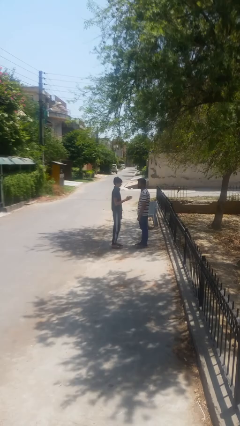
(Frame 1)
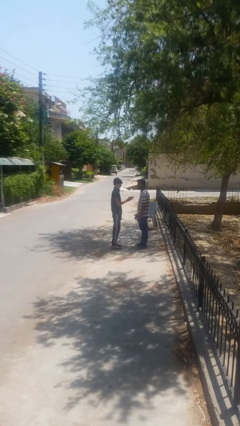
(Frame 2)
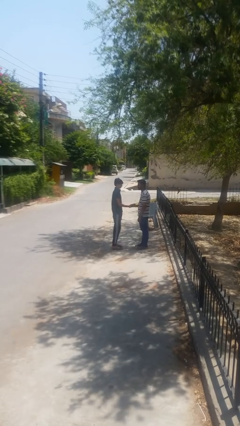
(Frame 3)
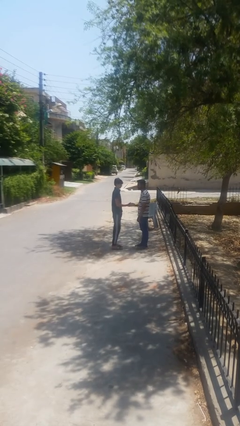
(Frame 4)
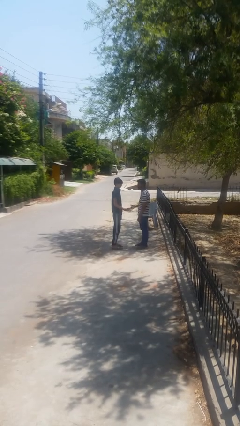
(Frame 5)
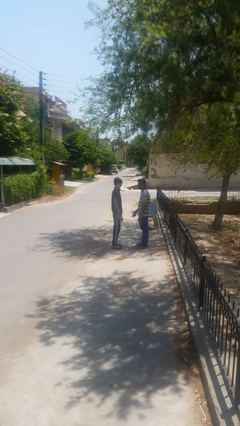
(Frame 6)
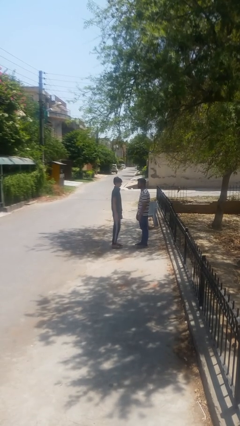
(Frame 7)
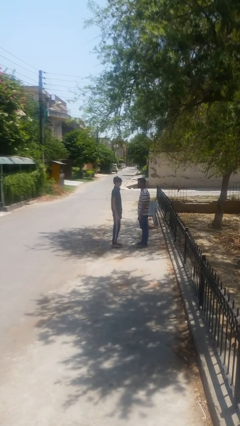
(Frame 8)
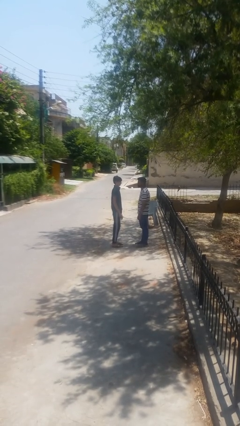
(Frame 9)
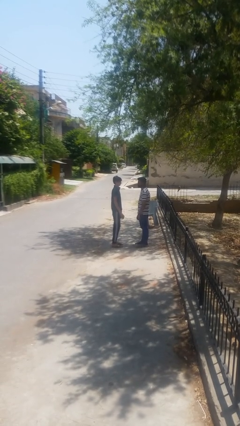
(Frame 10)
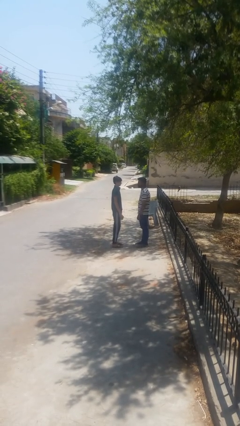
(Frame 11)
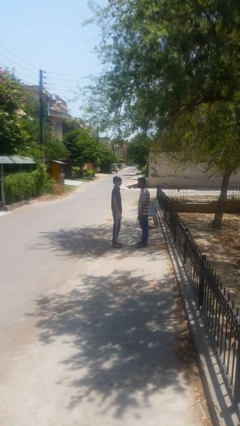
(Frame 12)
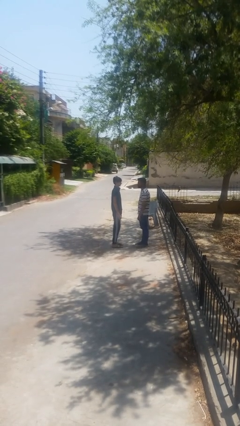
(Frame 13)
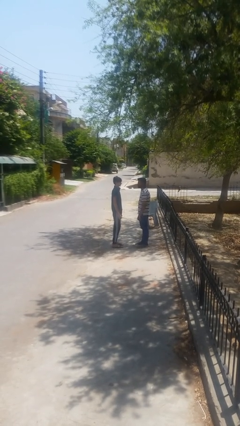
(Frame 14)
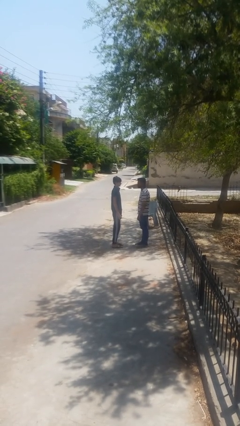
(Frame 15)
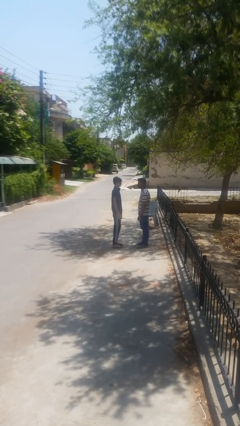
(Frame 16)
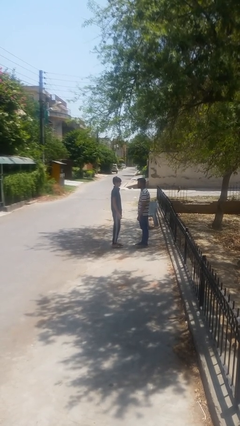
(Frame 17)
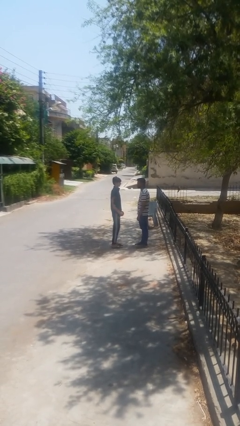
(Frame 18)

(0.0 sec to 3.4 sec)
person highfives hand

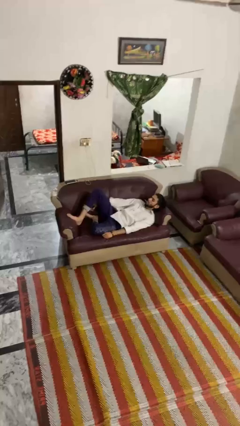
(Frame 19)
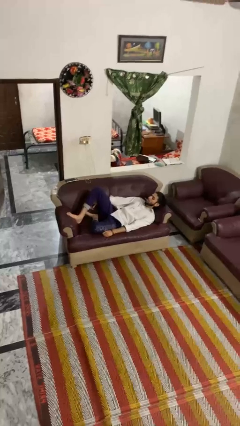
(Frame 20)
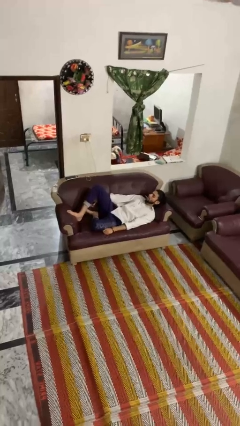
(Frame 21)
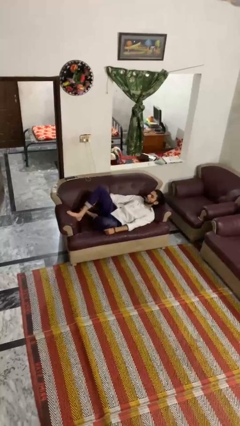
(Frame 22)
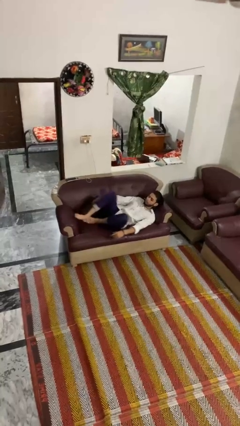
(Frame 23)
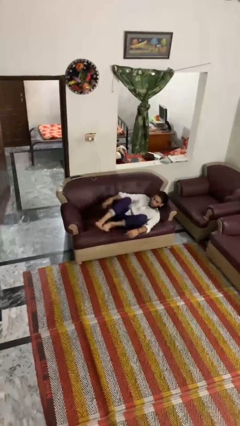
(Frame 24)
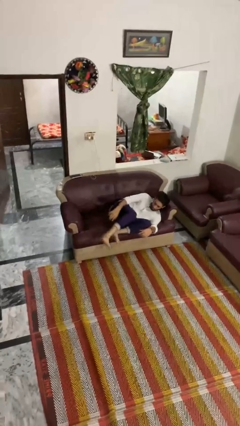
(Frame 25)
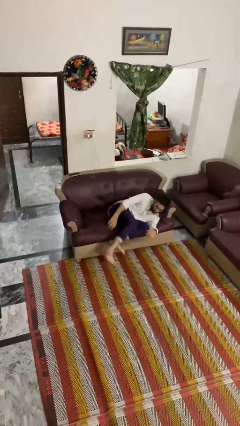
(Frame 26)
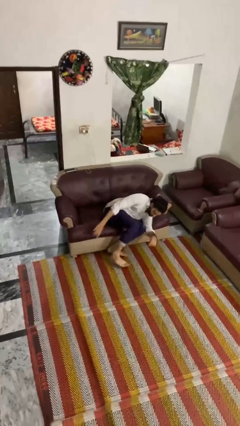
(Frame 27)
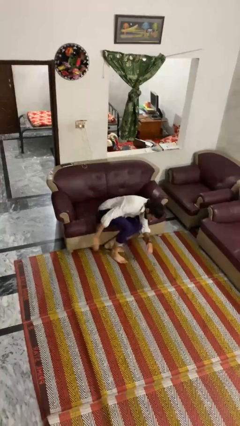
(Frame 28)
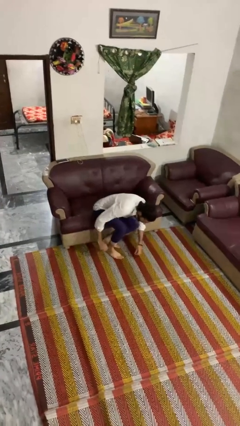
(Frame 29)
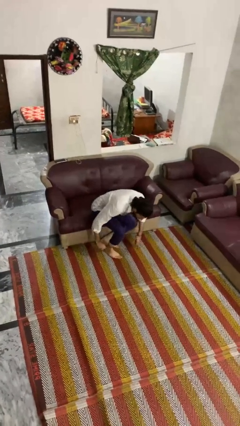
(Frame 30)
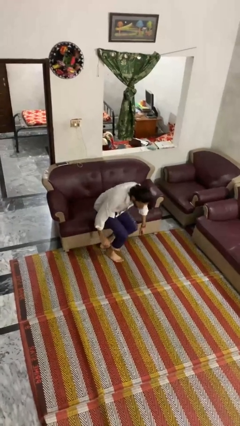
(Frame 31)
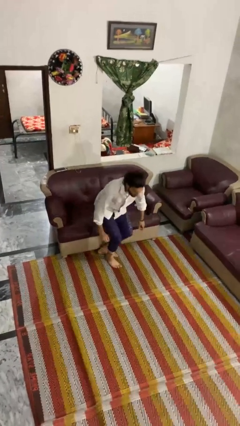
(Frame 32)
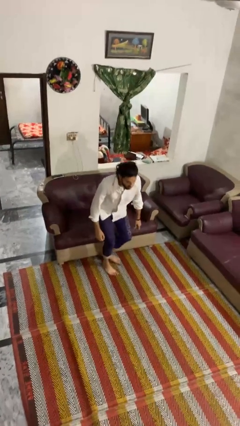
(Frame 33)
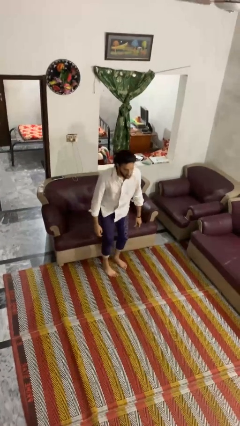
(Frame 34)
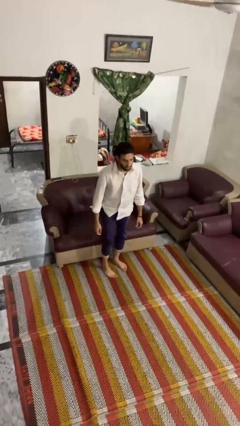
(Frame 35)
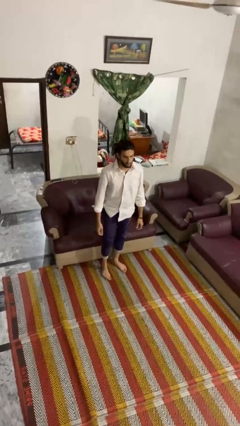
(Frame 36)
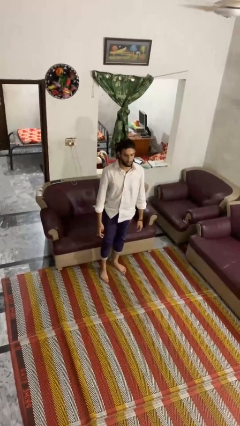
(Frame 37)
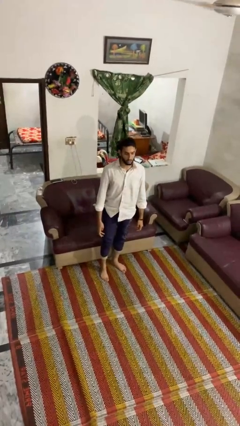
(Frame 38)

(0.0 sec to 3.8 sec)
person stands up

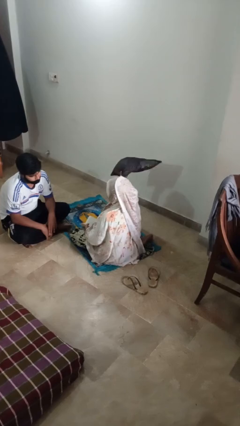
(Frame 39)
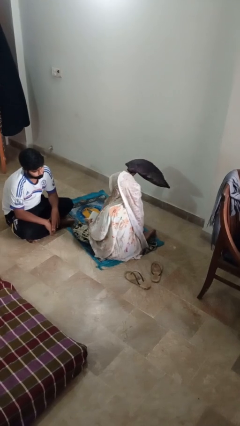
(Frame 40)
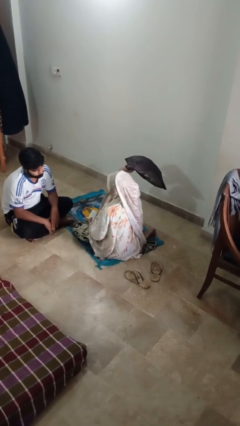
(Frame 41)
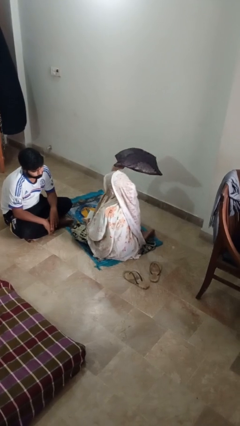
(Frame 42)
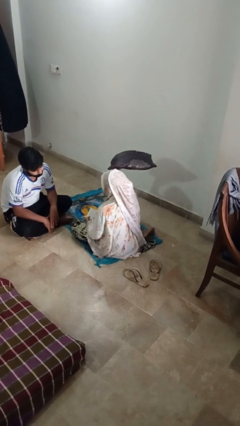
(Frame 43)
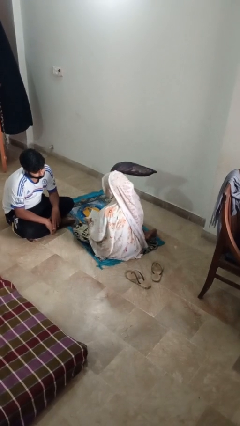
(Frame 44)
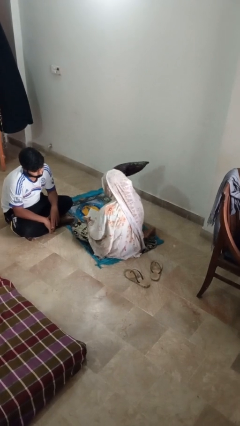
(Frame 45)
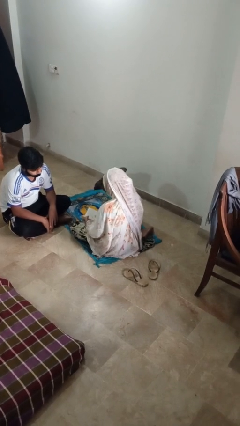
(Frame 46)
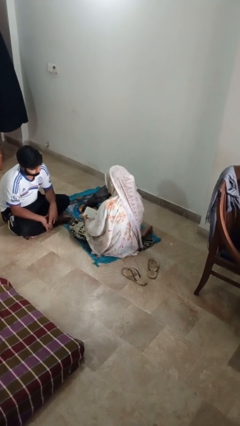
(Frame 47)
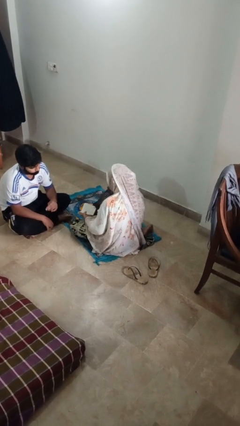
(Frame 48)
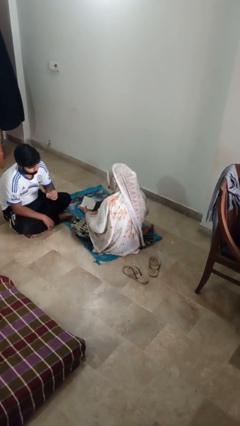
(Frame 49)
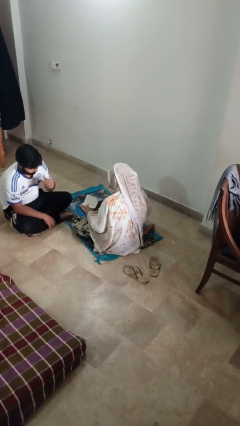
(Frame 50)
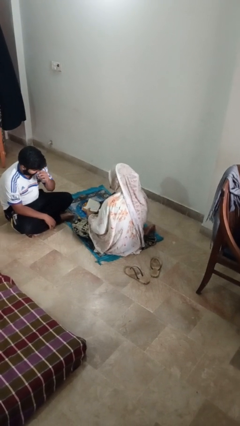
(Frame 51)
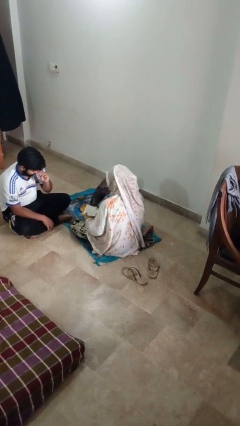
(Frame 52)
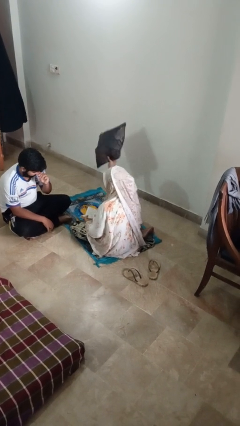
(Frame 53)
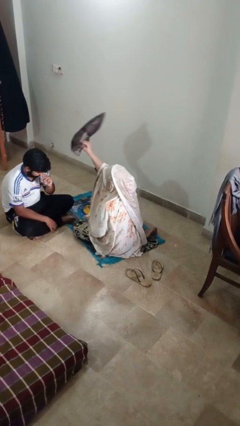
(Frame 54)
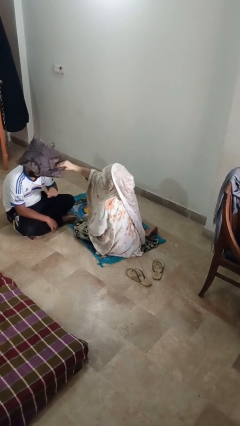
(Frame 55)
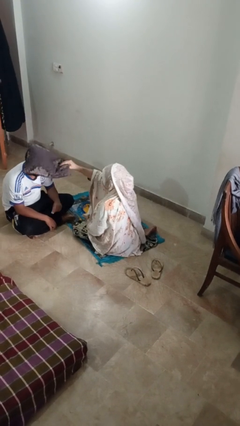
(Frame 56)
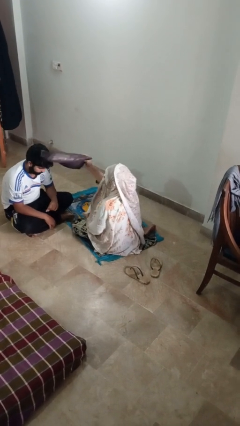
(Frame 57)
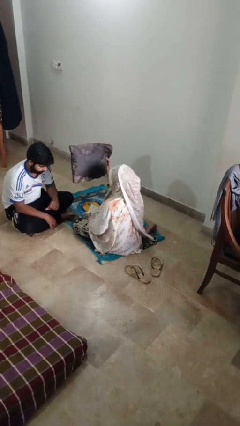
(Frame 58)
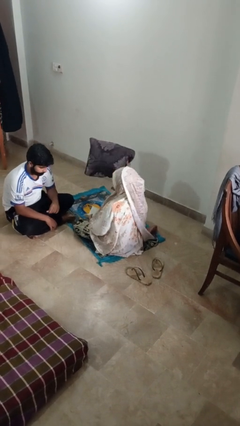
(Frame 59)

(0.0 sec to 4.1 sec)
person hits person with pillow

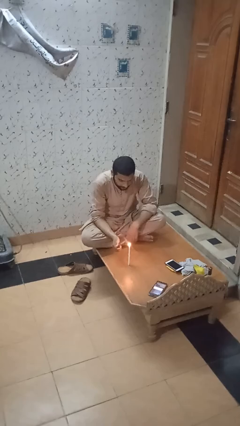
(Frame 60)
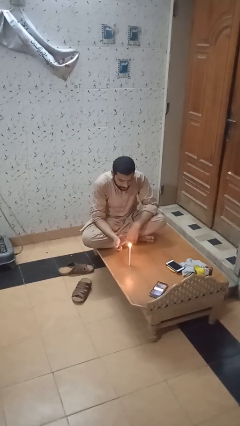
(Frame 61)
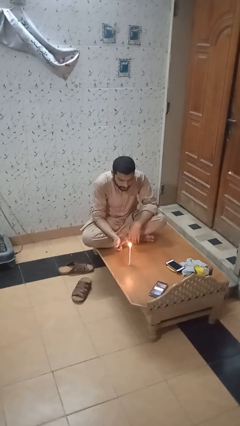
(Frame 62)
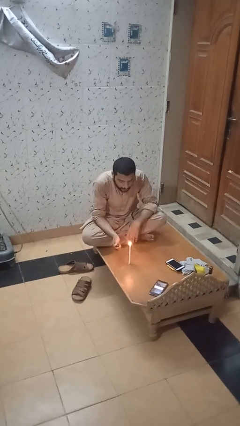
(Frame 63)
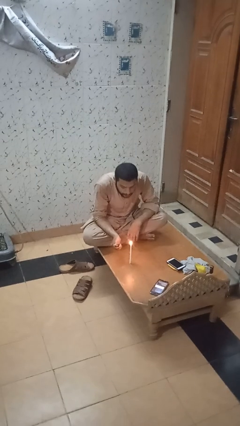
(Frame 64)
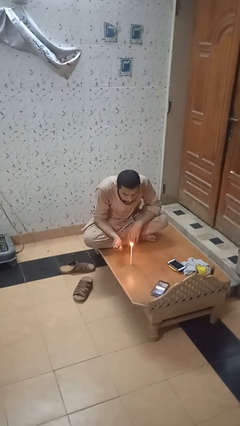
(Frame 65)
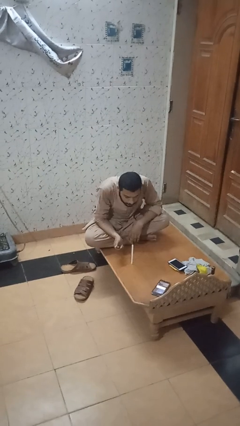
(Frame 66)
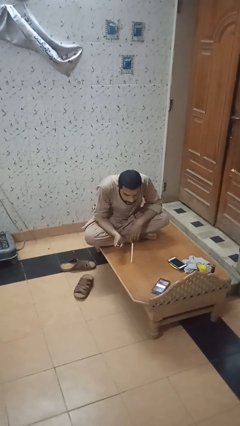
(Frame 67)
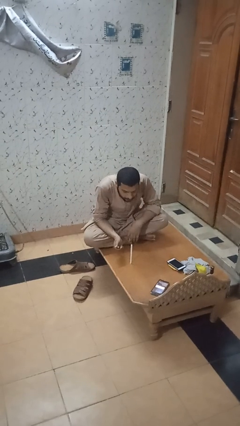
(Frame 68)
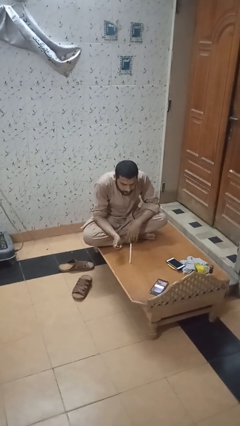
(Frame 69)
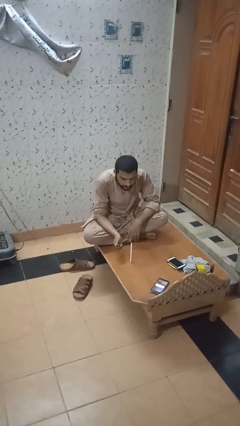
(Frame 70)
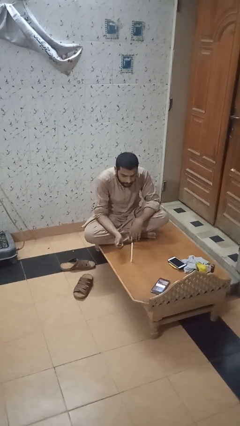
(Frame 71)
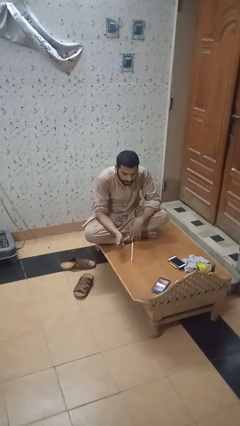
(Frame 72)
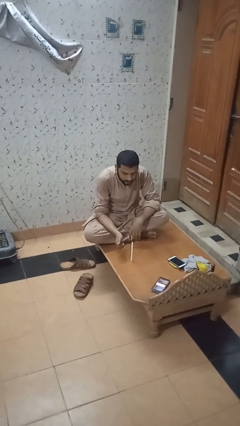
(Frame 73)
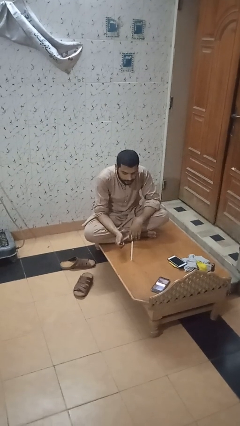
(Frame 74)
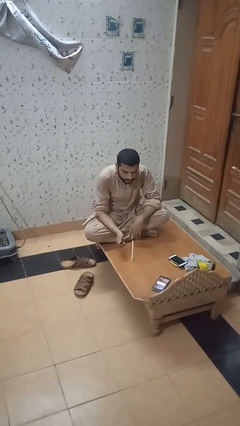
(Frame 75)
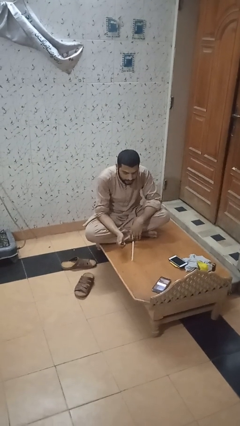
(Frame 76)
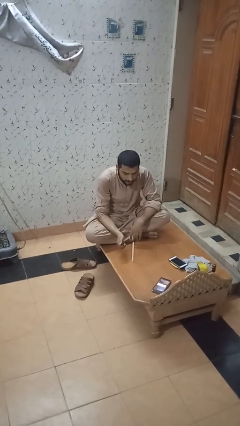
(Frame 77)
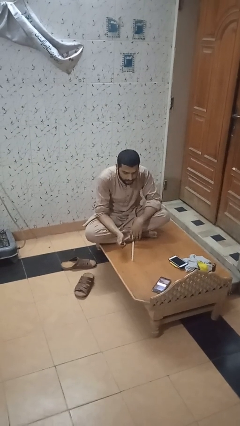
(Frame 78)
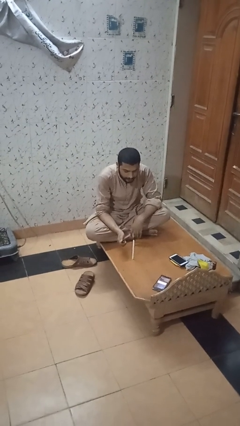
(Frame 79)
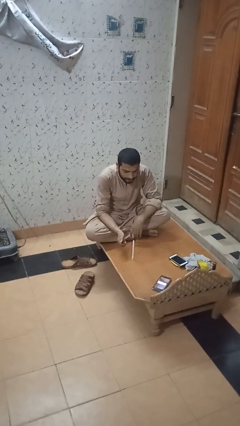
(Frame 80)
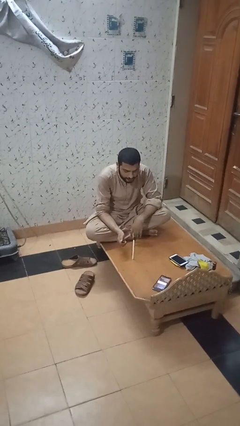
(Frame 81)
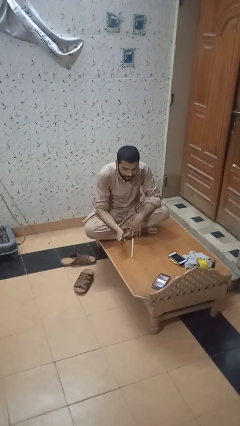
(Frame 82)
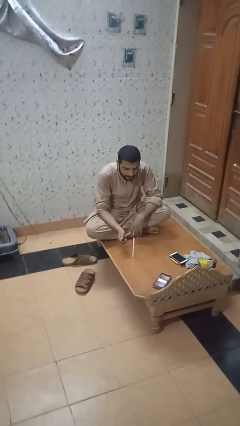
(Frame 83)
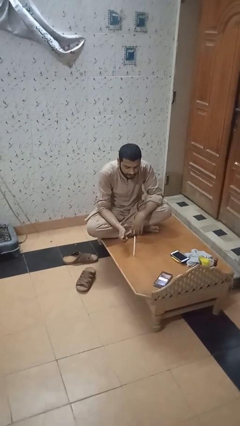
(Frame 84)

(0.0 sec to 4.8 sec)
person extinguishes candle

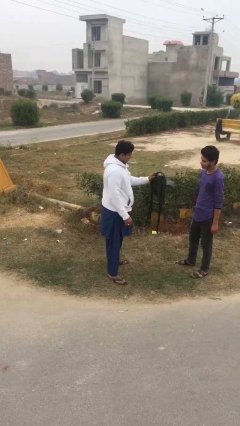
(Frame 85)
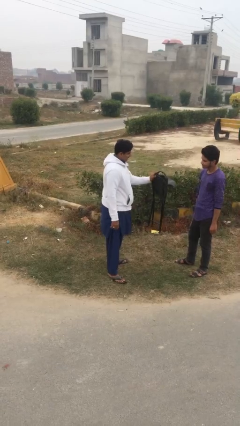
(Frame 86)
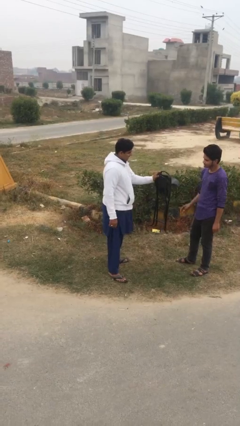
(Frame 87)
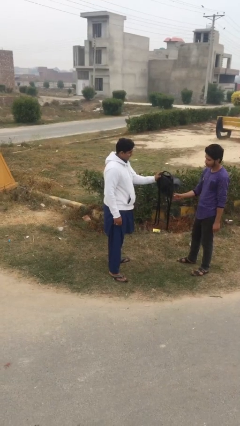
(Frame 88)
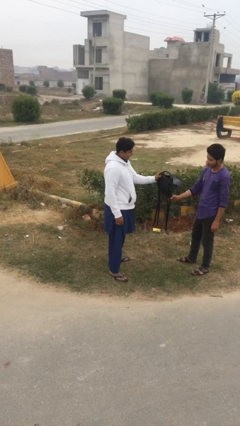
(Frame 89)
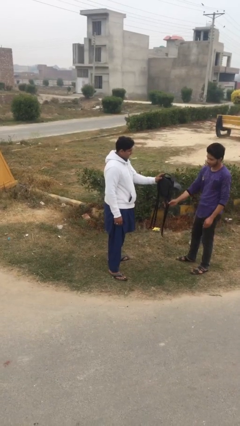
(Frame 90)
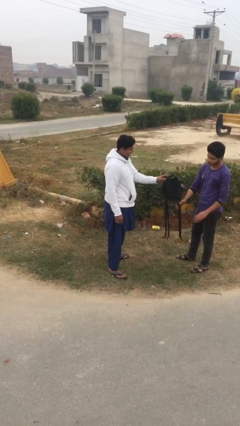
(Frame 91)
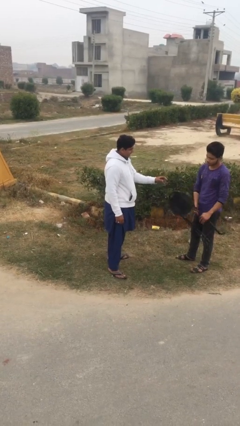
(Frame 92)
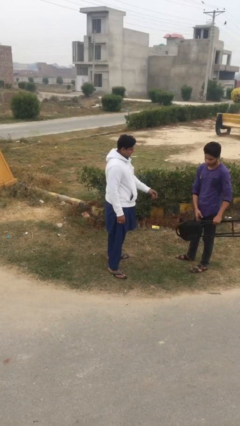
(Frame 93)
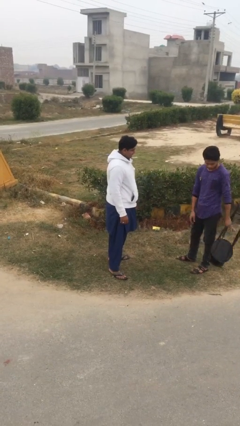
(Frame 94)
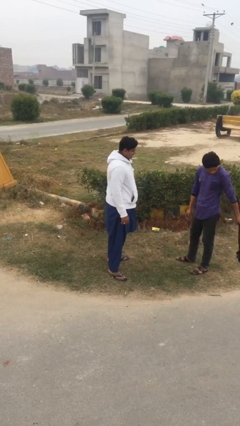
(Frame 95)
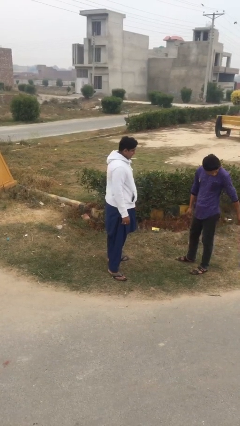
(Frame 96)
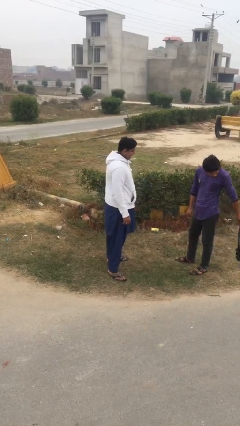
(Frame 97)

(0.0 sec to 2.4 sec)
person transfers object to person
